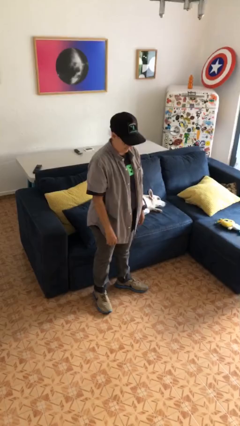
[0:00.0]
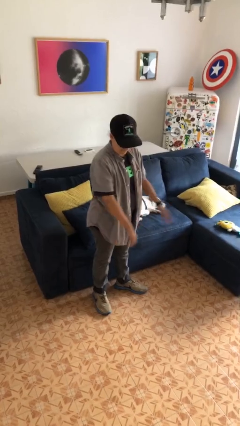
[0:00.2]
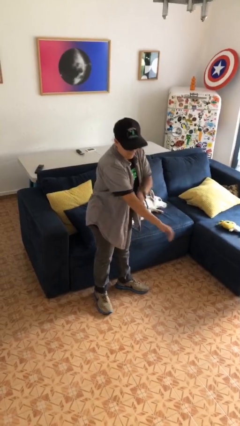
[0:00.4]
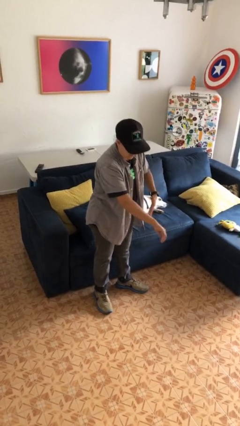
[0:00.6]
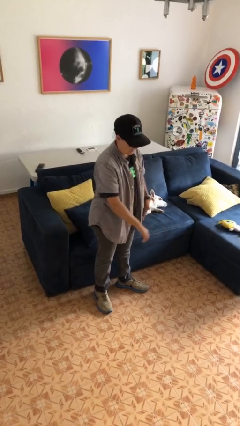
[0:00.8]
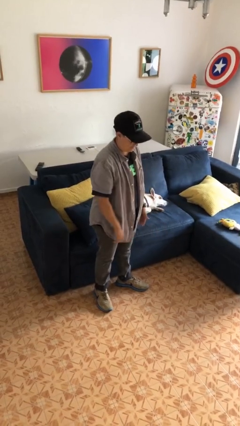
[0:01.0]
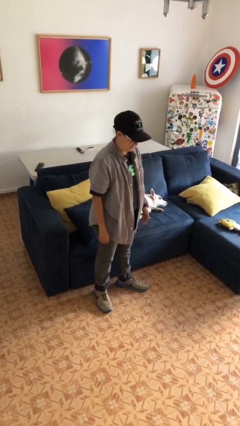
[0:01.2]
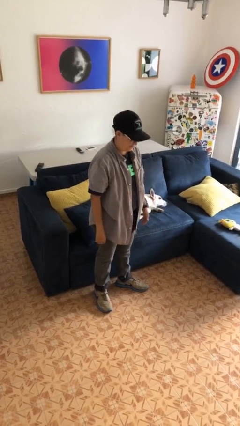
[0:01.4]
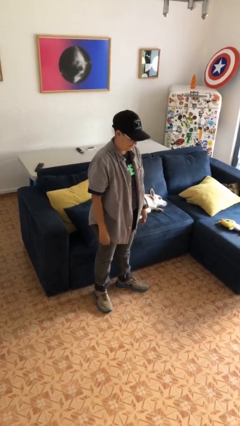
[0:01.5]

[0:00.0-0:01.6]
person swats bug

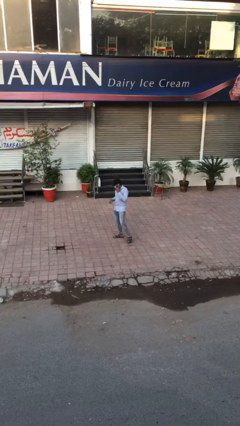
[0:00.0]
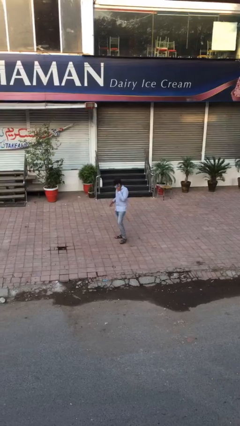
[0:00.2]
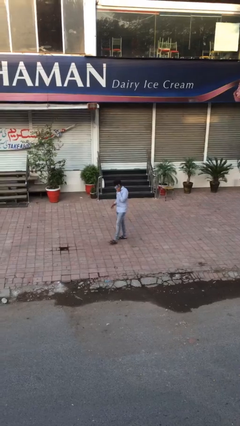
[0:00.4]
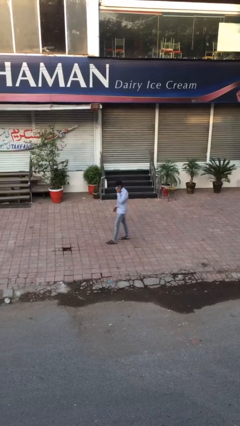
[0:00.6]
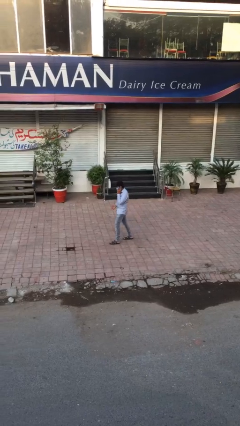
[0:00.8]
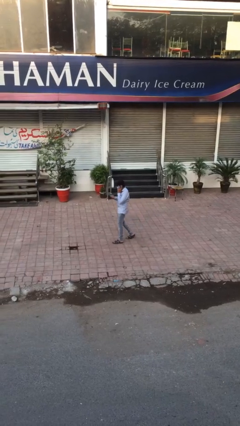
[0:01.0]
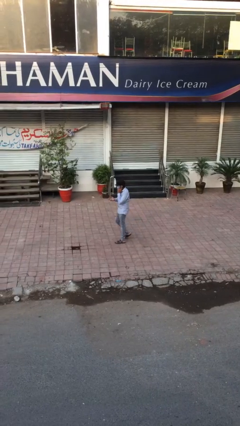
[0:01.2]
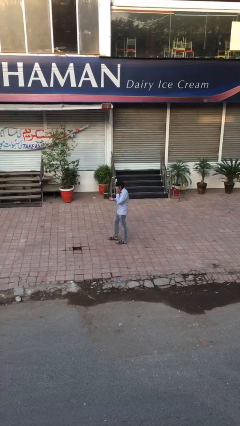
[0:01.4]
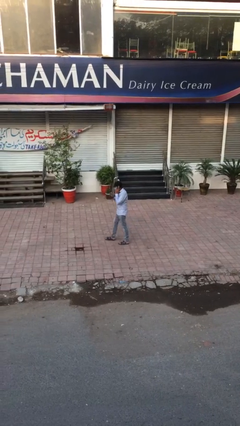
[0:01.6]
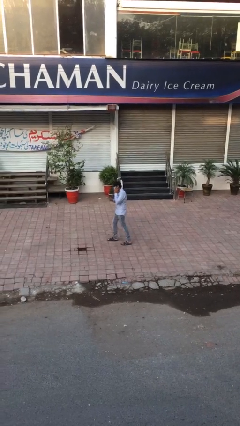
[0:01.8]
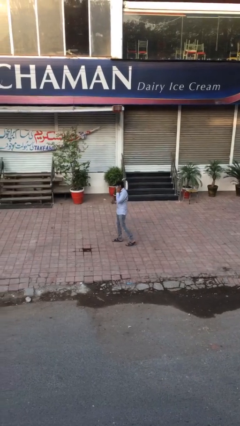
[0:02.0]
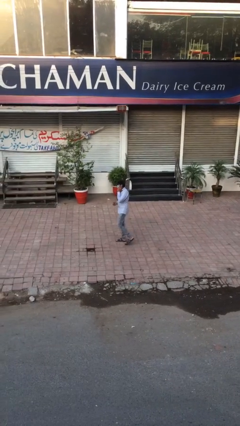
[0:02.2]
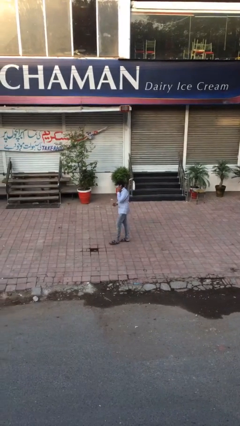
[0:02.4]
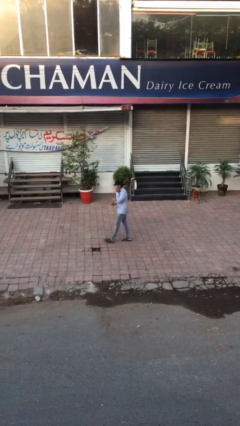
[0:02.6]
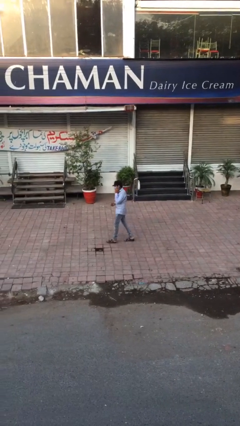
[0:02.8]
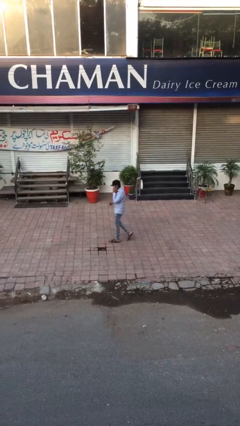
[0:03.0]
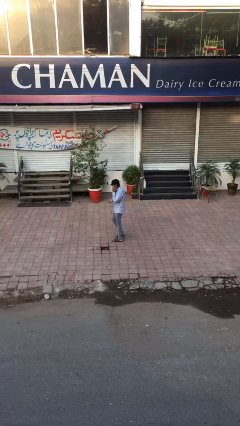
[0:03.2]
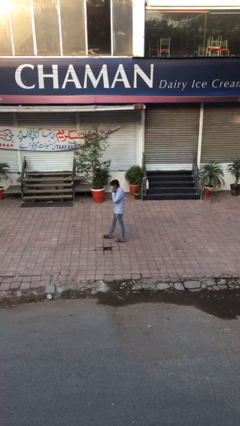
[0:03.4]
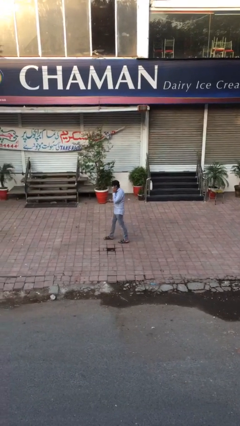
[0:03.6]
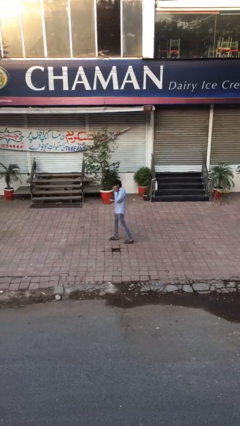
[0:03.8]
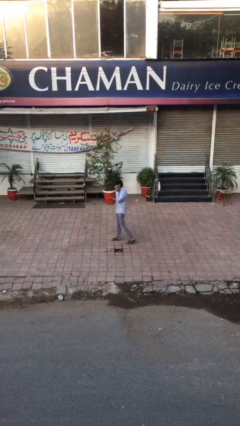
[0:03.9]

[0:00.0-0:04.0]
person talks on phone

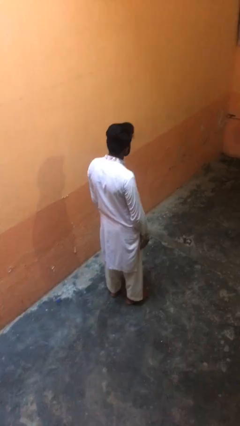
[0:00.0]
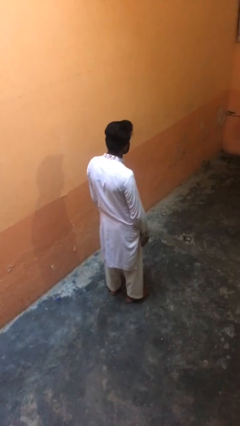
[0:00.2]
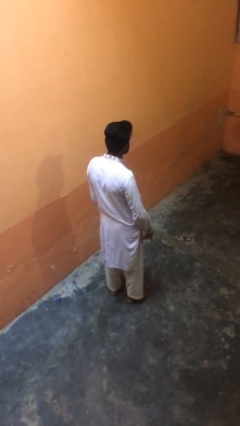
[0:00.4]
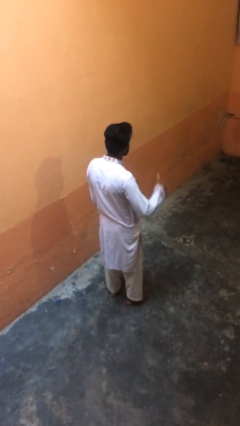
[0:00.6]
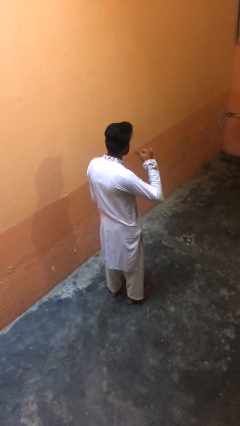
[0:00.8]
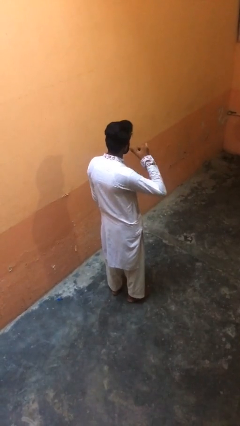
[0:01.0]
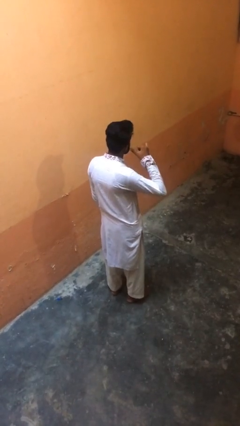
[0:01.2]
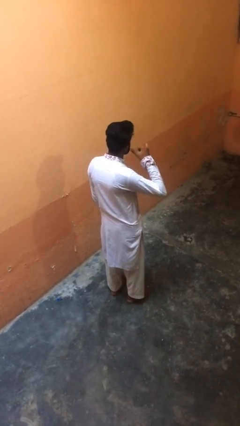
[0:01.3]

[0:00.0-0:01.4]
person gestures call me

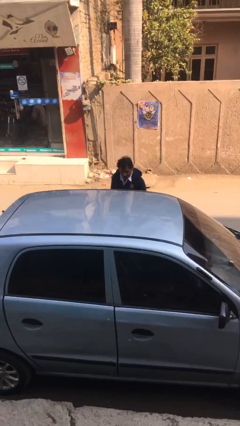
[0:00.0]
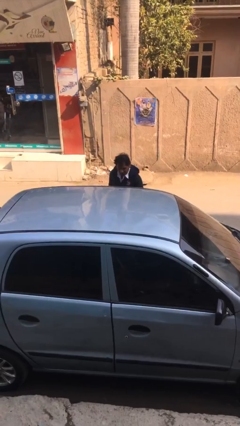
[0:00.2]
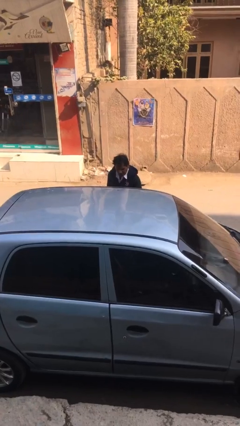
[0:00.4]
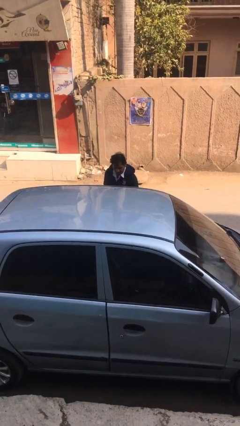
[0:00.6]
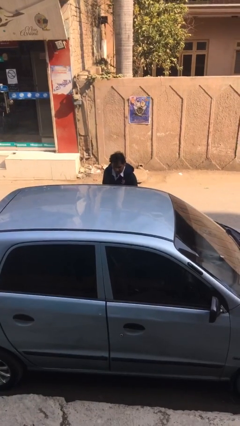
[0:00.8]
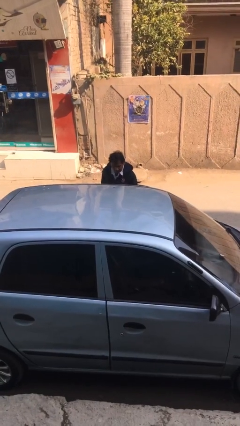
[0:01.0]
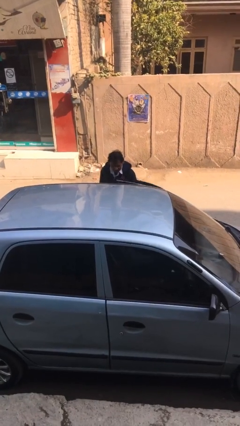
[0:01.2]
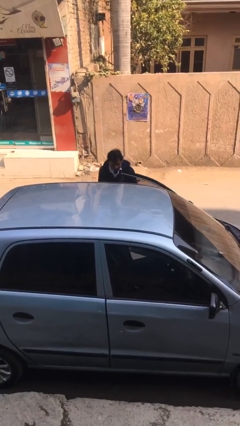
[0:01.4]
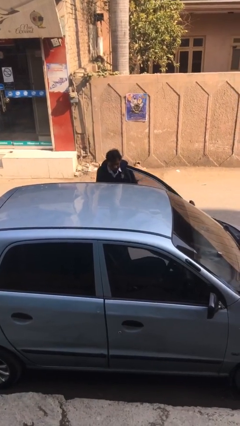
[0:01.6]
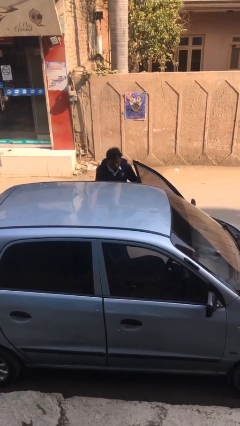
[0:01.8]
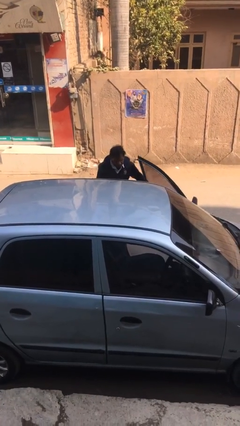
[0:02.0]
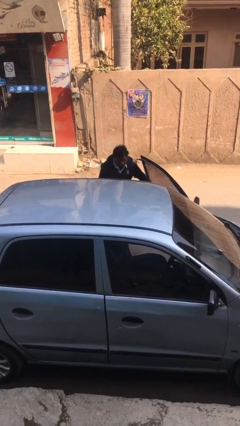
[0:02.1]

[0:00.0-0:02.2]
person opens car door

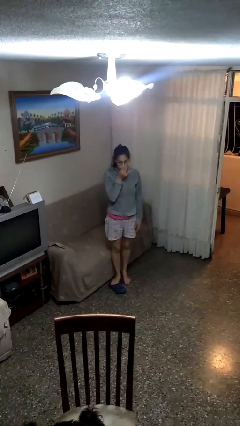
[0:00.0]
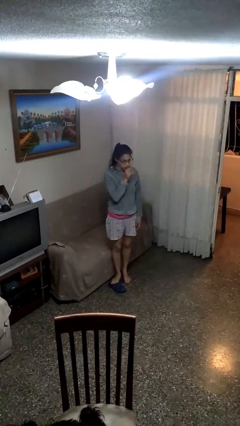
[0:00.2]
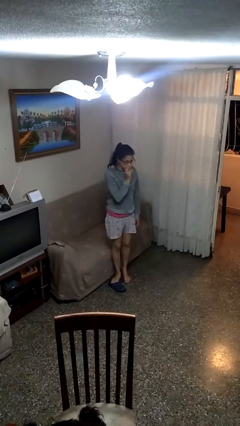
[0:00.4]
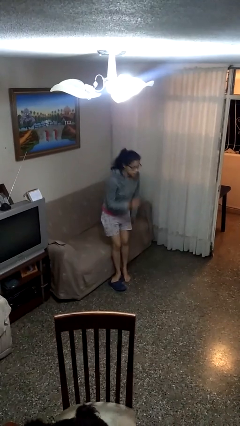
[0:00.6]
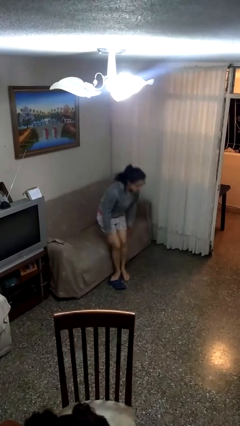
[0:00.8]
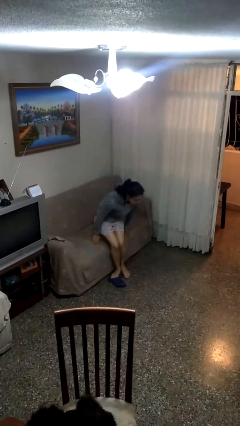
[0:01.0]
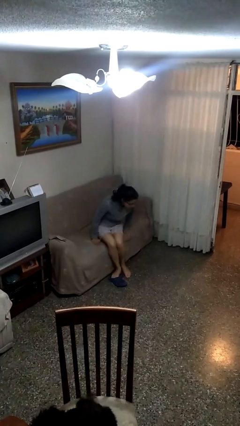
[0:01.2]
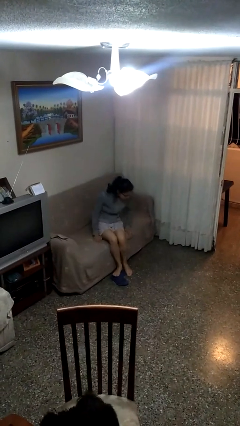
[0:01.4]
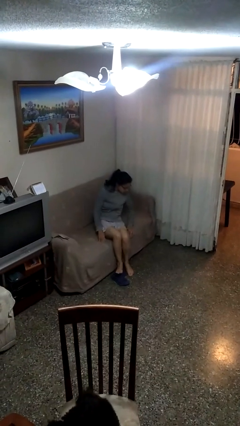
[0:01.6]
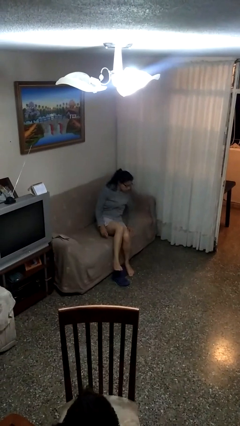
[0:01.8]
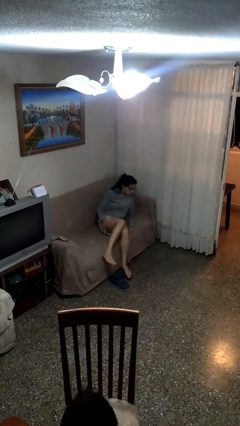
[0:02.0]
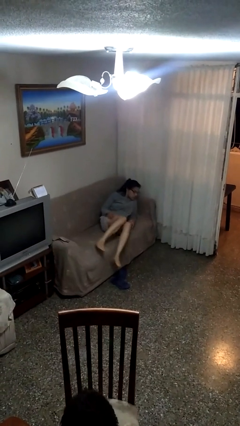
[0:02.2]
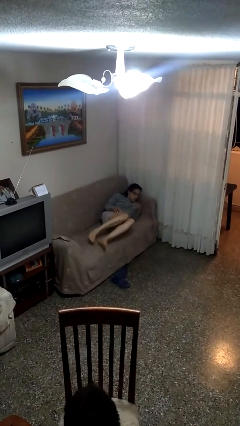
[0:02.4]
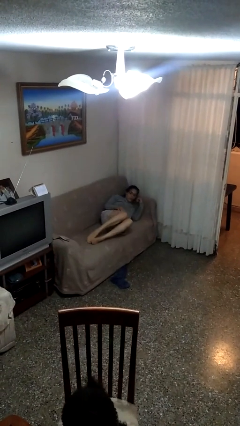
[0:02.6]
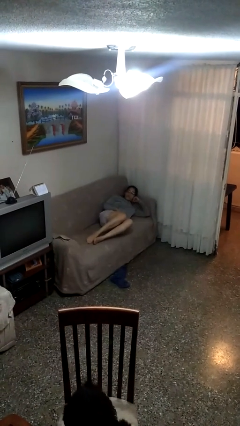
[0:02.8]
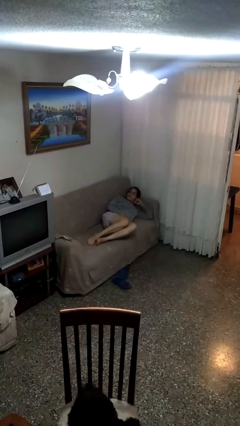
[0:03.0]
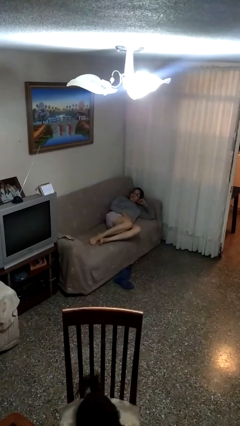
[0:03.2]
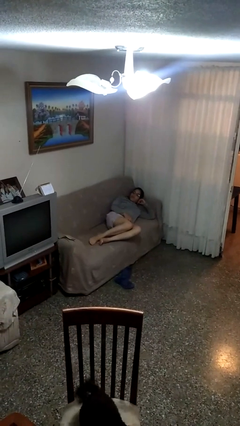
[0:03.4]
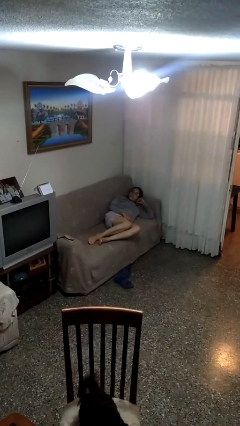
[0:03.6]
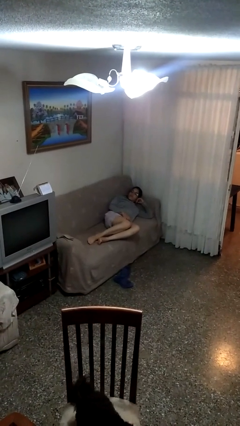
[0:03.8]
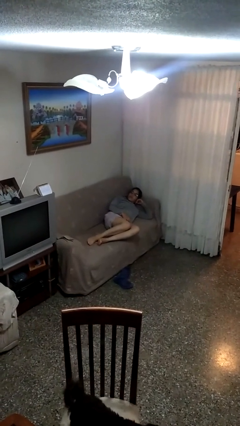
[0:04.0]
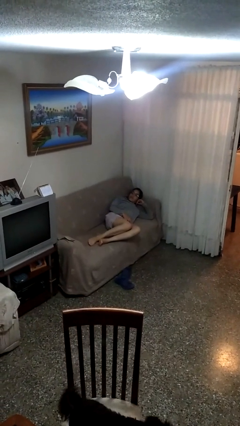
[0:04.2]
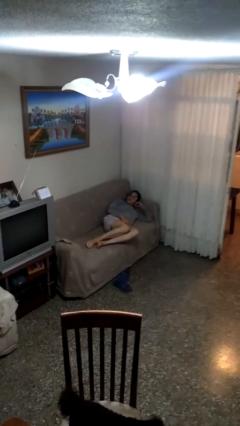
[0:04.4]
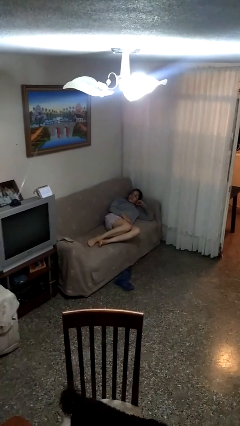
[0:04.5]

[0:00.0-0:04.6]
person lies down on couch

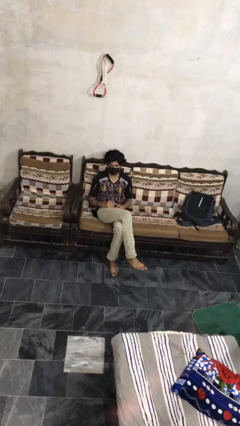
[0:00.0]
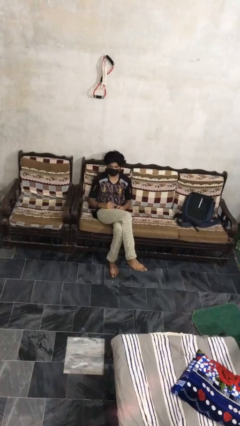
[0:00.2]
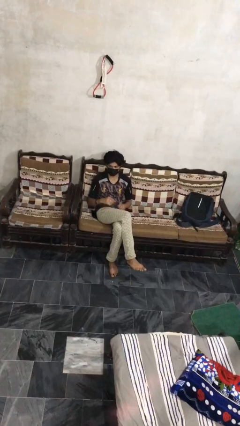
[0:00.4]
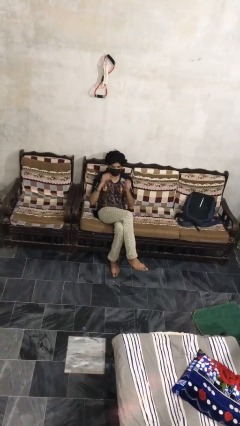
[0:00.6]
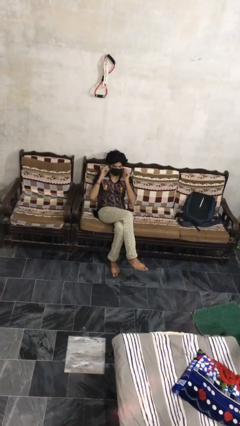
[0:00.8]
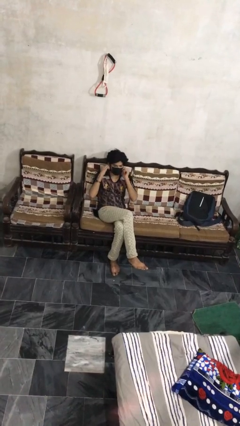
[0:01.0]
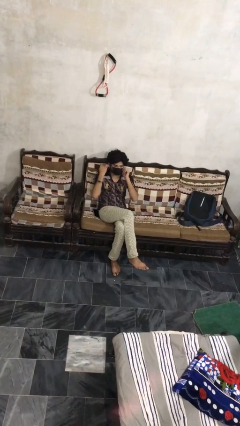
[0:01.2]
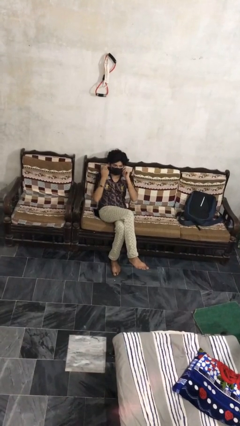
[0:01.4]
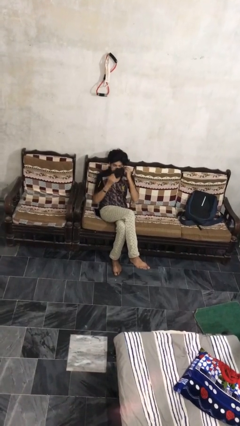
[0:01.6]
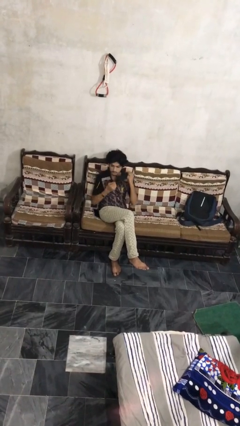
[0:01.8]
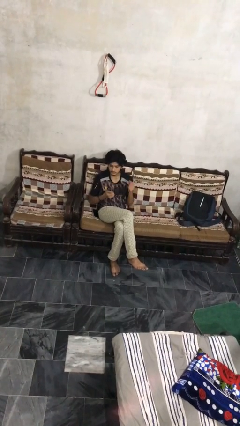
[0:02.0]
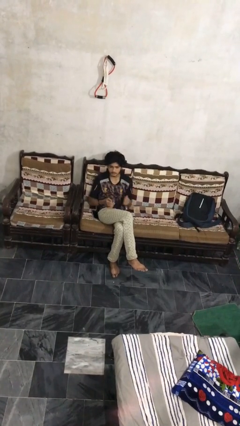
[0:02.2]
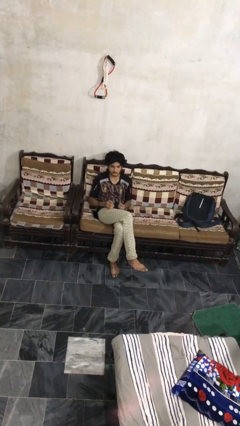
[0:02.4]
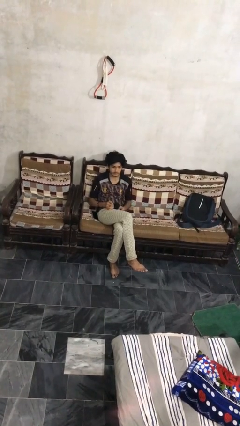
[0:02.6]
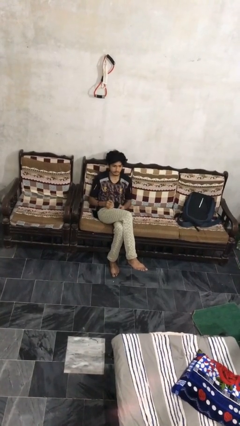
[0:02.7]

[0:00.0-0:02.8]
person takes off facemask

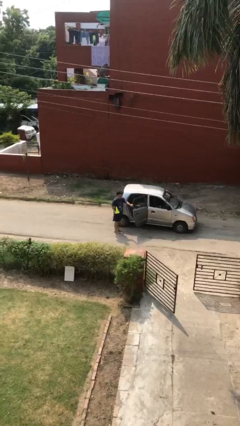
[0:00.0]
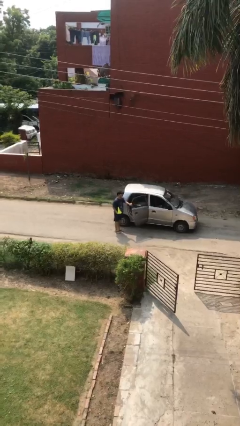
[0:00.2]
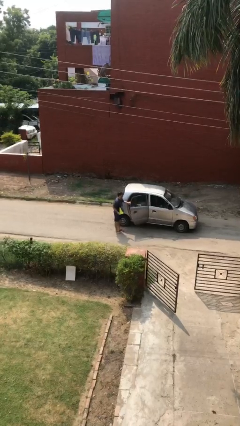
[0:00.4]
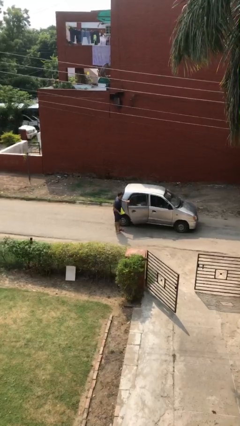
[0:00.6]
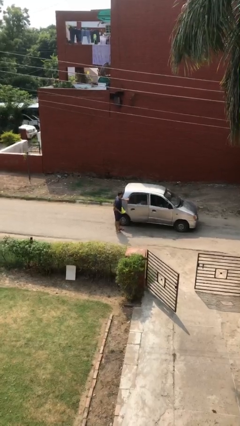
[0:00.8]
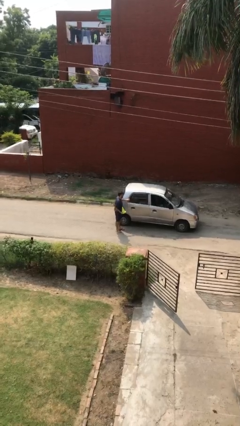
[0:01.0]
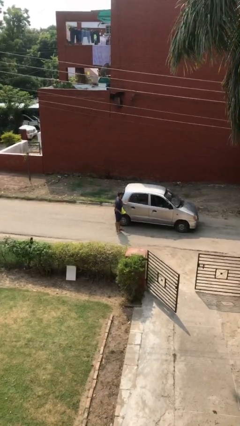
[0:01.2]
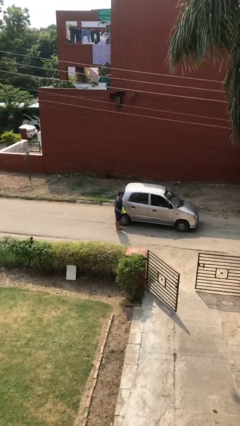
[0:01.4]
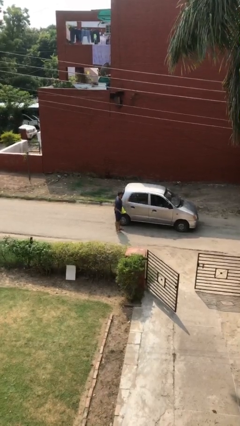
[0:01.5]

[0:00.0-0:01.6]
person closes car door
